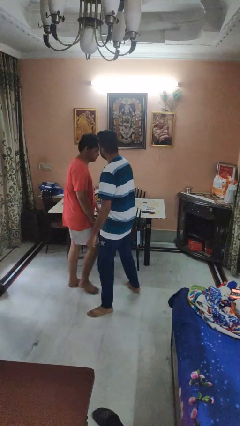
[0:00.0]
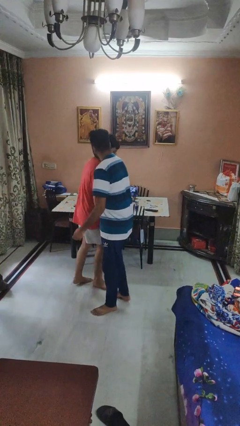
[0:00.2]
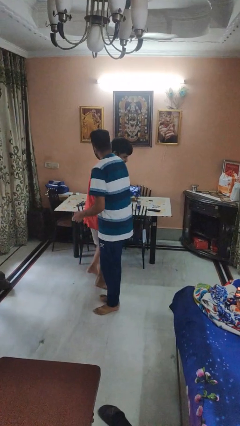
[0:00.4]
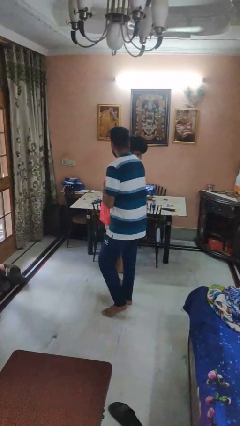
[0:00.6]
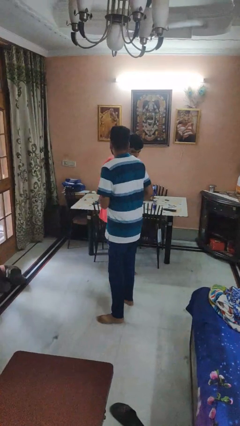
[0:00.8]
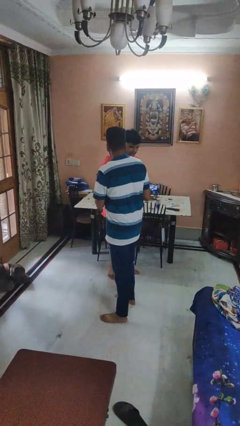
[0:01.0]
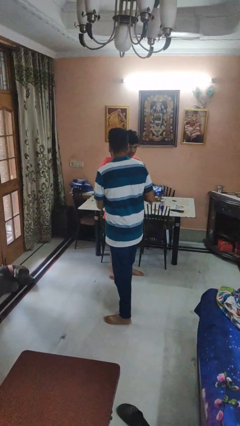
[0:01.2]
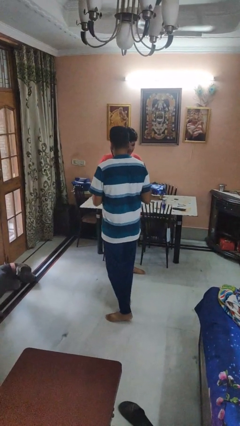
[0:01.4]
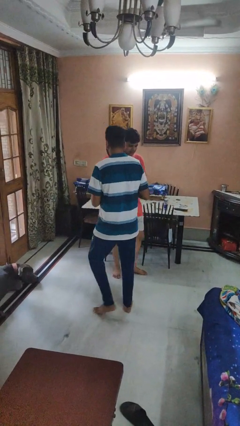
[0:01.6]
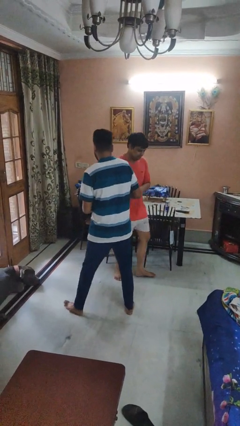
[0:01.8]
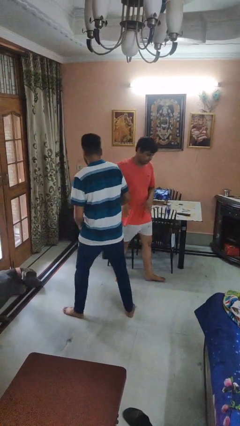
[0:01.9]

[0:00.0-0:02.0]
person bumps into person

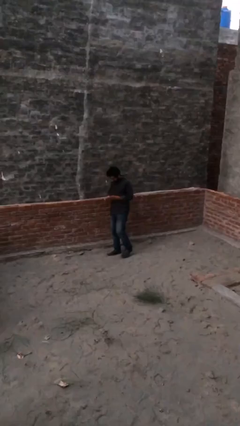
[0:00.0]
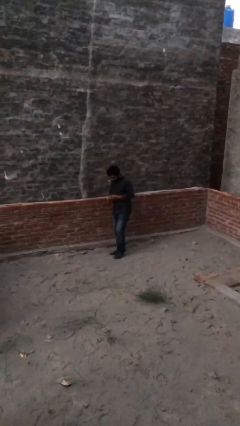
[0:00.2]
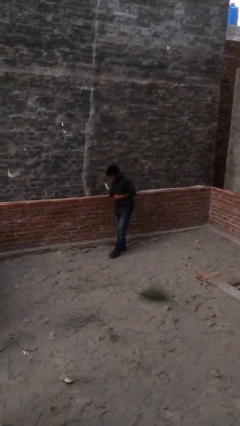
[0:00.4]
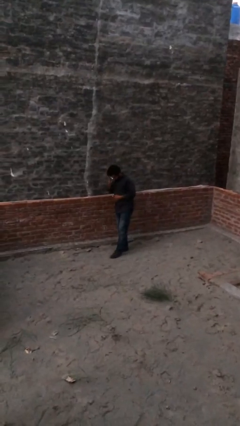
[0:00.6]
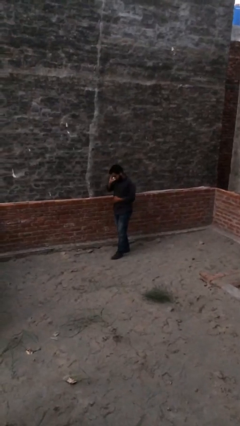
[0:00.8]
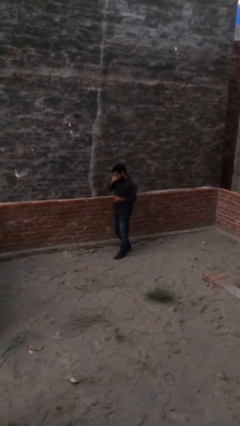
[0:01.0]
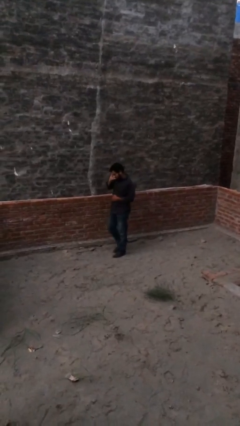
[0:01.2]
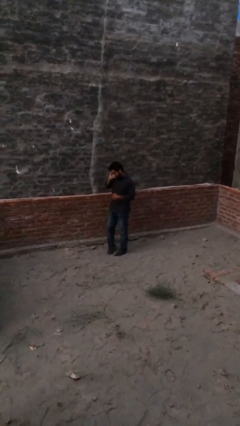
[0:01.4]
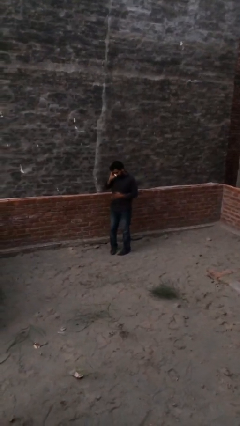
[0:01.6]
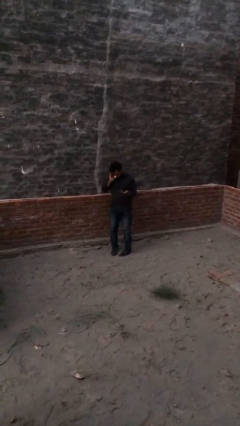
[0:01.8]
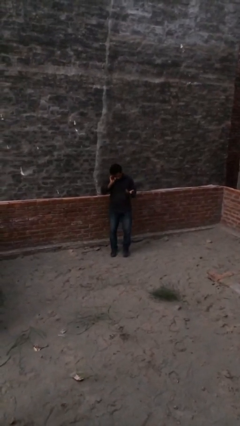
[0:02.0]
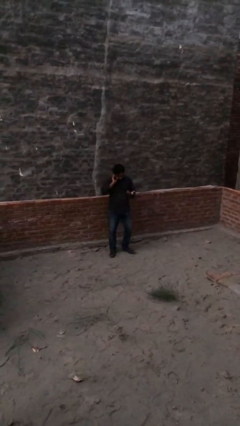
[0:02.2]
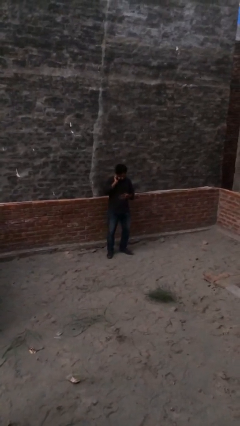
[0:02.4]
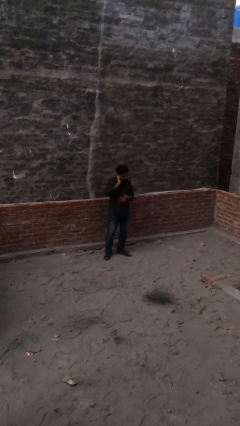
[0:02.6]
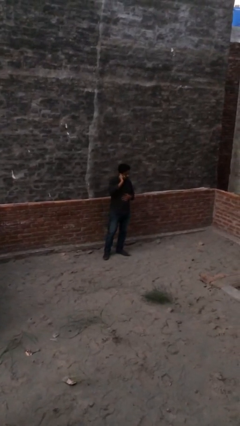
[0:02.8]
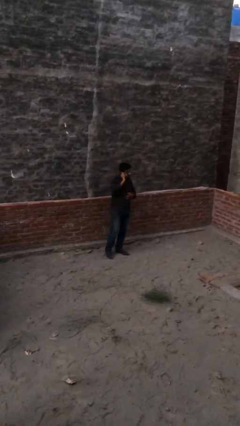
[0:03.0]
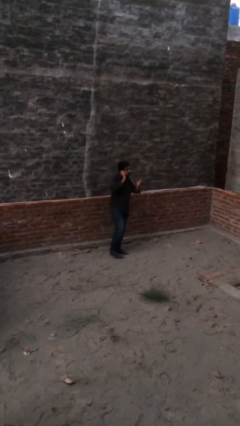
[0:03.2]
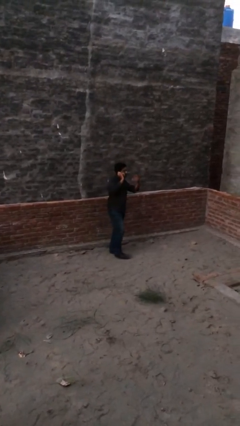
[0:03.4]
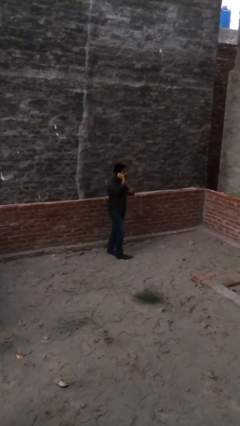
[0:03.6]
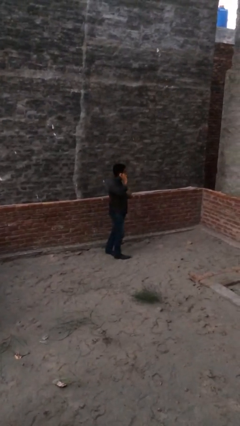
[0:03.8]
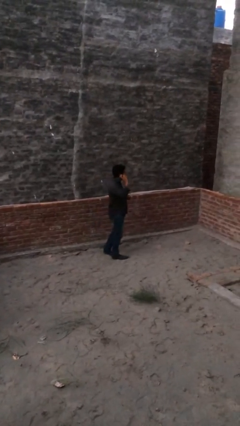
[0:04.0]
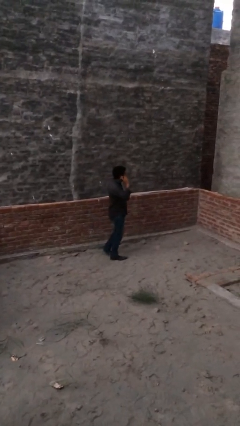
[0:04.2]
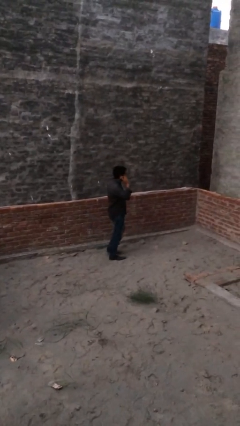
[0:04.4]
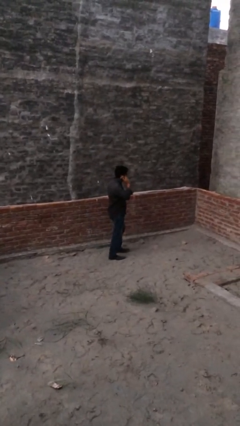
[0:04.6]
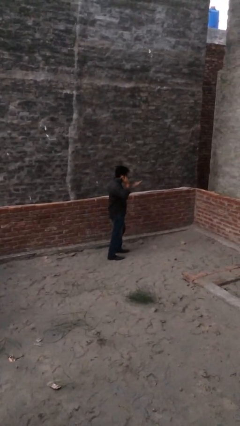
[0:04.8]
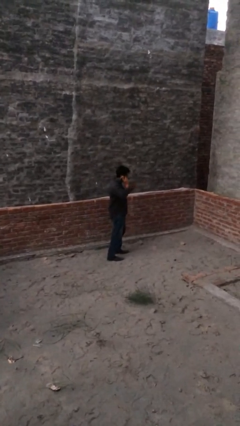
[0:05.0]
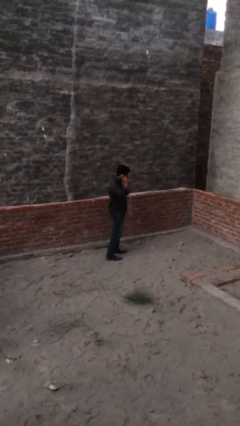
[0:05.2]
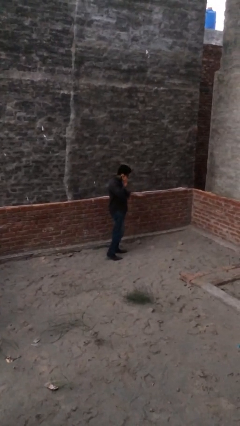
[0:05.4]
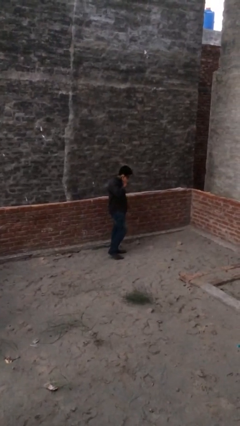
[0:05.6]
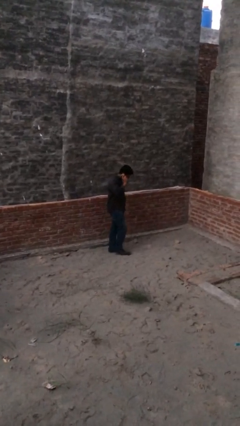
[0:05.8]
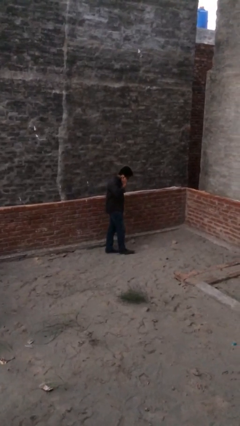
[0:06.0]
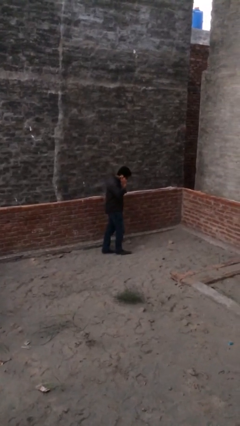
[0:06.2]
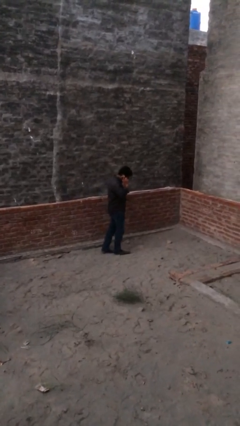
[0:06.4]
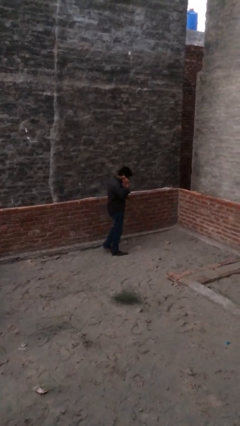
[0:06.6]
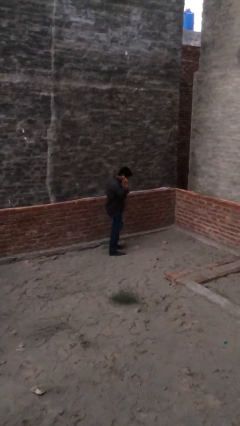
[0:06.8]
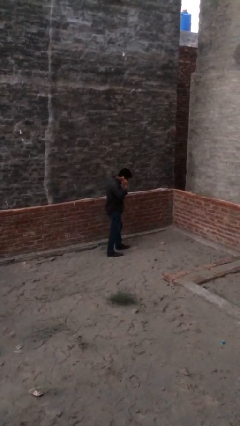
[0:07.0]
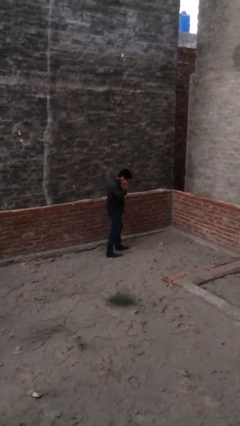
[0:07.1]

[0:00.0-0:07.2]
person talks on phone

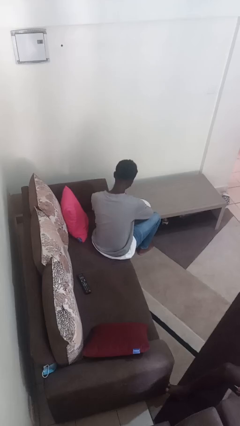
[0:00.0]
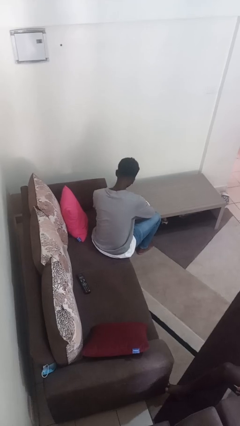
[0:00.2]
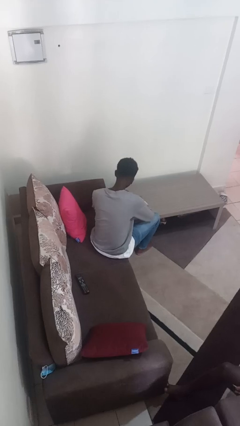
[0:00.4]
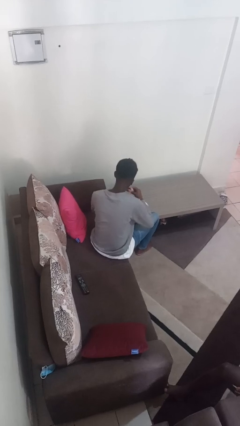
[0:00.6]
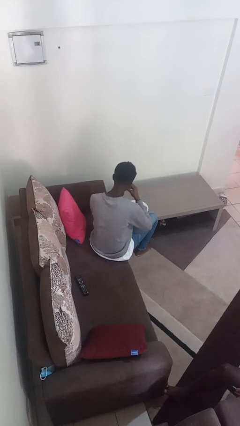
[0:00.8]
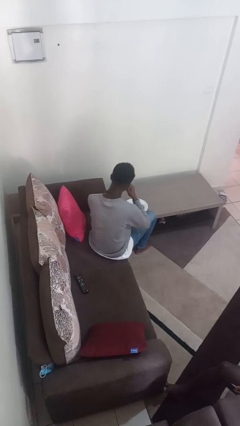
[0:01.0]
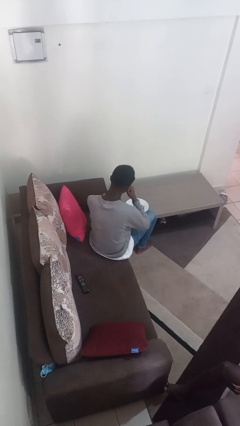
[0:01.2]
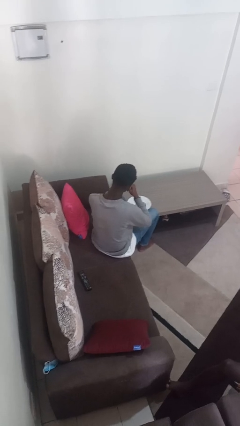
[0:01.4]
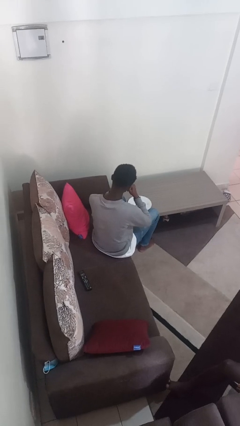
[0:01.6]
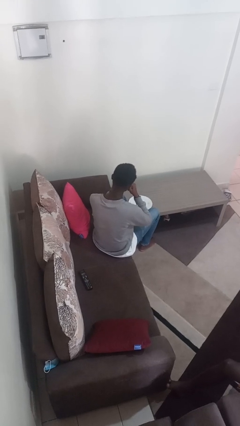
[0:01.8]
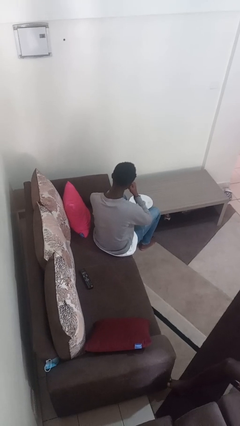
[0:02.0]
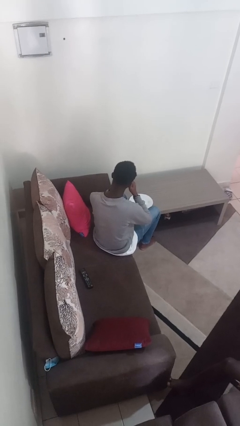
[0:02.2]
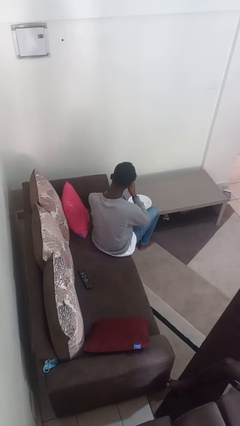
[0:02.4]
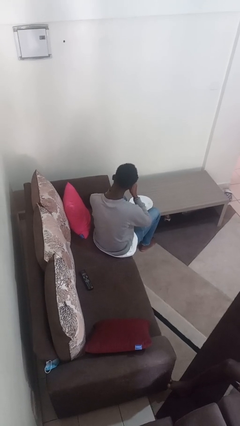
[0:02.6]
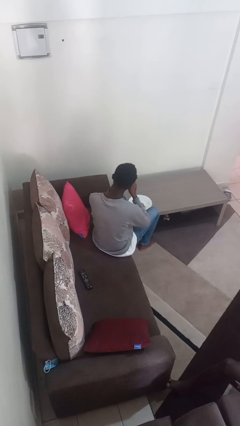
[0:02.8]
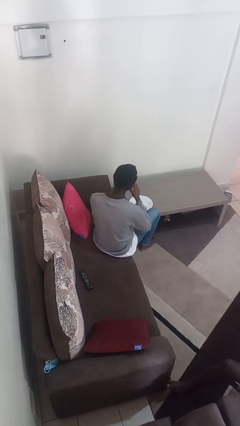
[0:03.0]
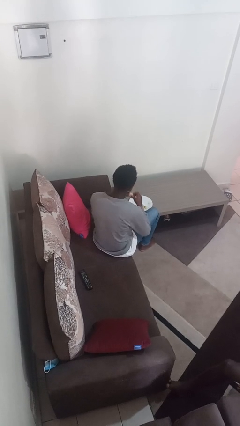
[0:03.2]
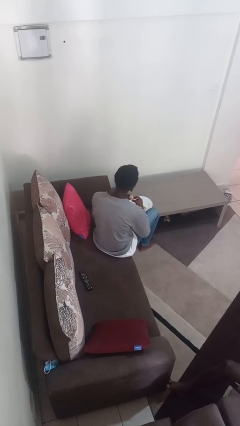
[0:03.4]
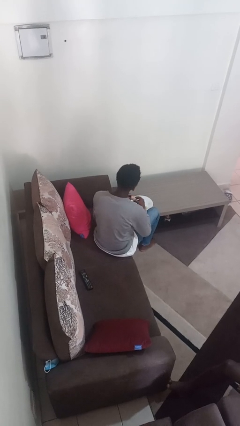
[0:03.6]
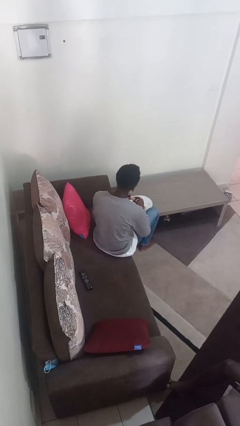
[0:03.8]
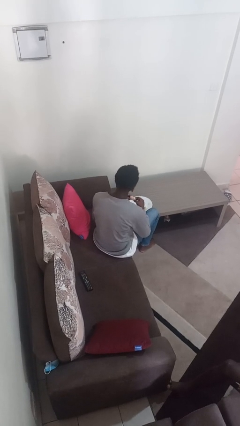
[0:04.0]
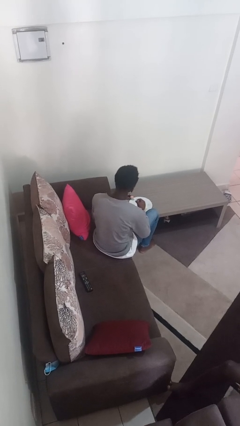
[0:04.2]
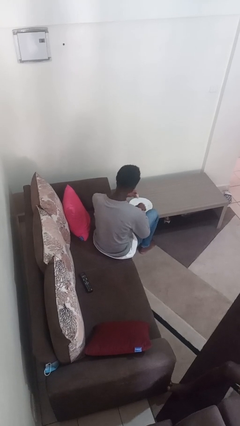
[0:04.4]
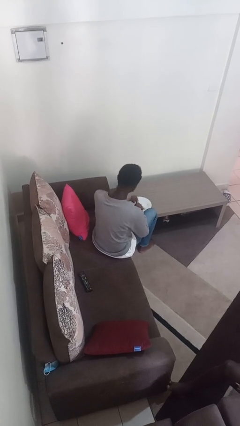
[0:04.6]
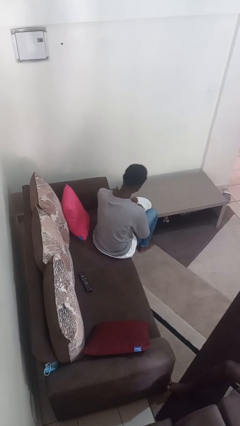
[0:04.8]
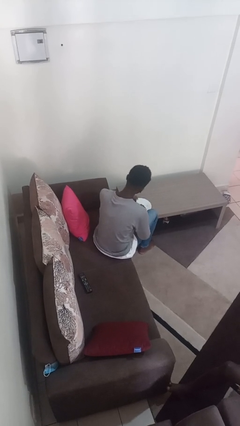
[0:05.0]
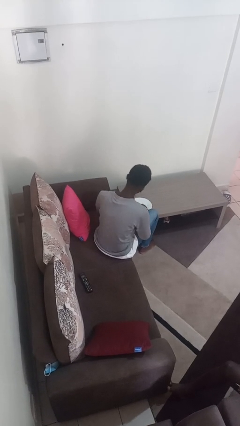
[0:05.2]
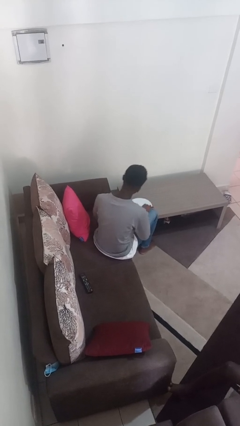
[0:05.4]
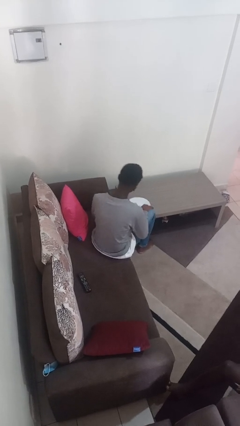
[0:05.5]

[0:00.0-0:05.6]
person eats with hands

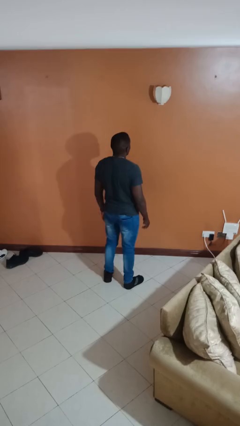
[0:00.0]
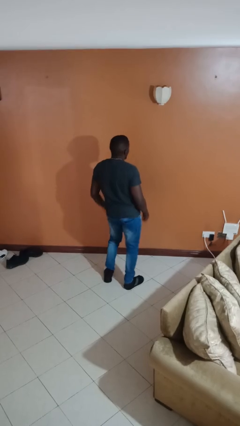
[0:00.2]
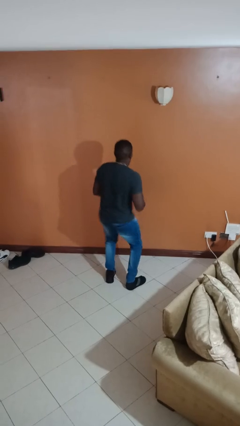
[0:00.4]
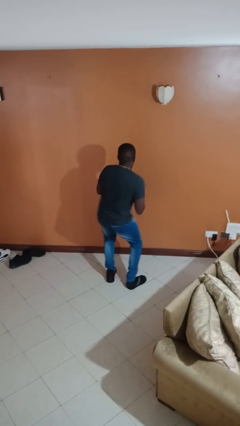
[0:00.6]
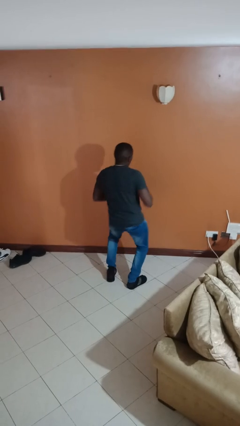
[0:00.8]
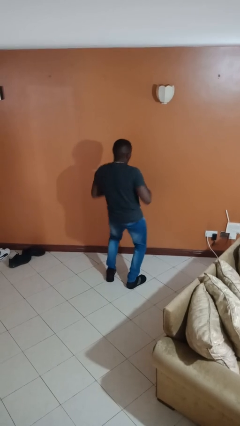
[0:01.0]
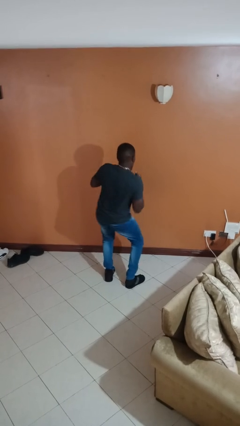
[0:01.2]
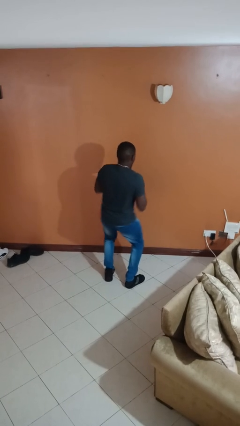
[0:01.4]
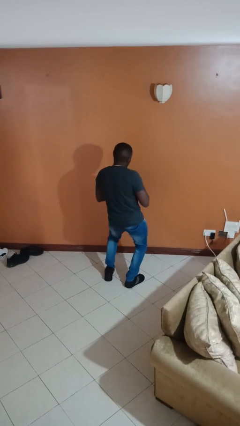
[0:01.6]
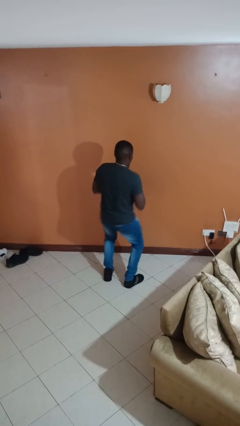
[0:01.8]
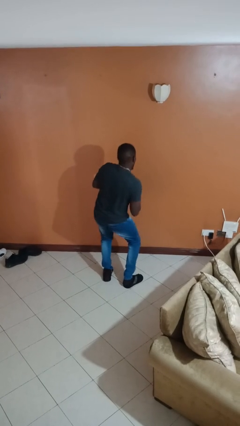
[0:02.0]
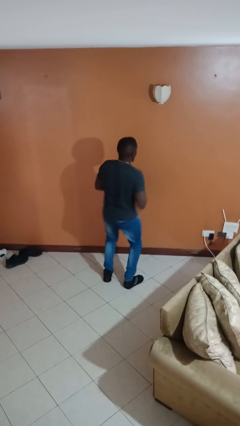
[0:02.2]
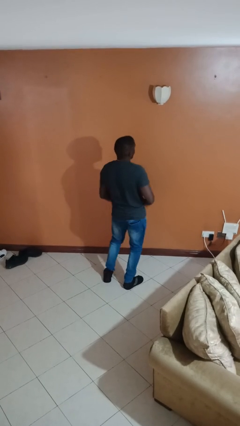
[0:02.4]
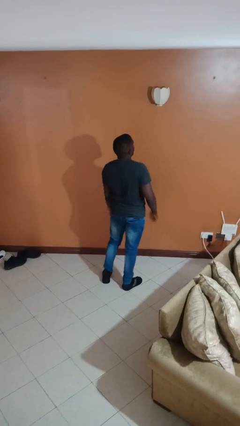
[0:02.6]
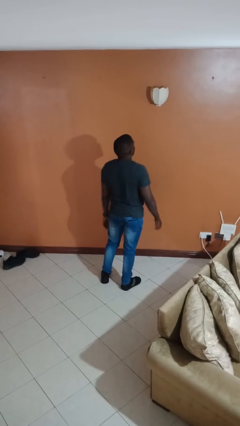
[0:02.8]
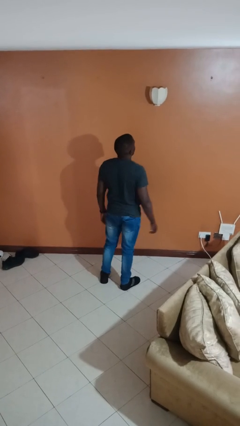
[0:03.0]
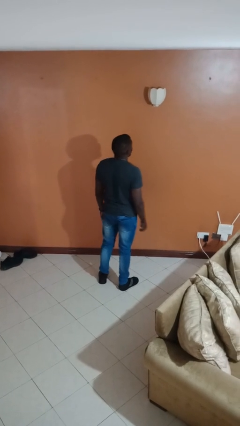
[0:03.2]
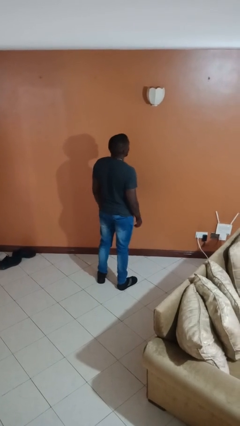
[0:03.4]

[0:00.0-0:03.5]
person wiggles hips
